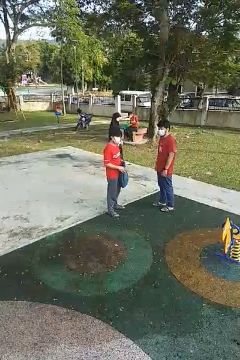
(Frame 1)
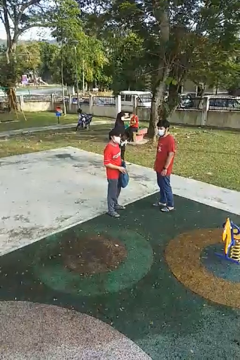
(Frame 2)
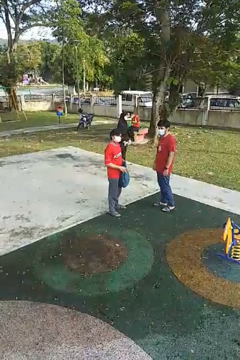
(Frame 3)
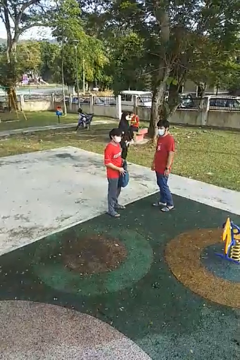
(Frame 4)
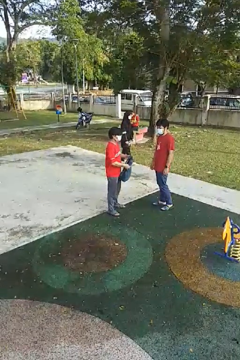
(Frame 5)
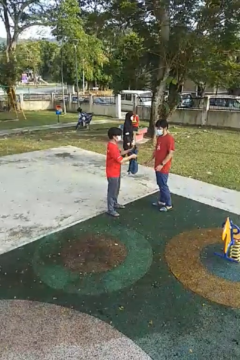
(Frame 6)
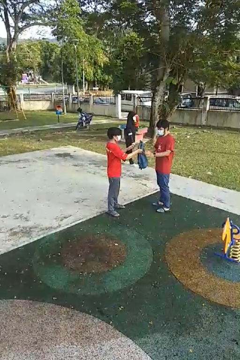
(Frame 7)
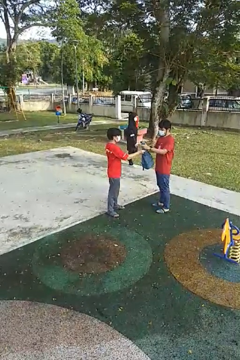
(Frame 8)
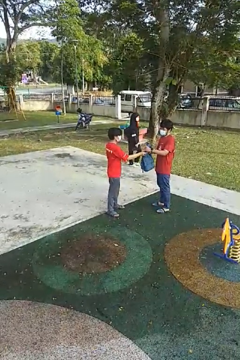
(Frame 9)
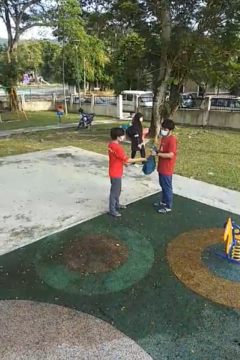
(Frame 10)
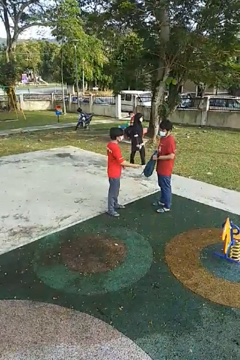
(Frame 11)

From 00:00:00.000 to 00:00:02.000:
person transfers object to person

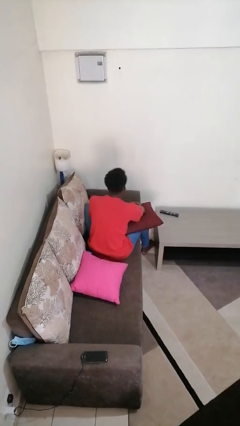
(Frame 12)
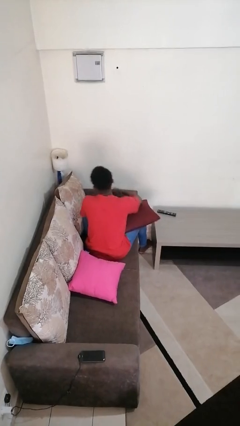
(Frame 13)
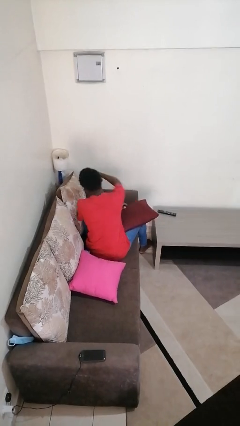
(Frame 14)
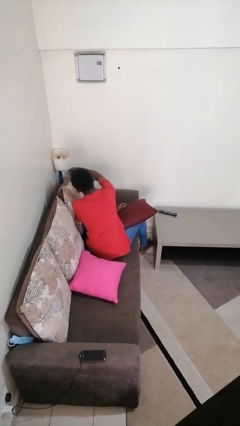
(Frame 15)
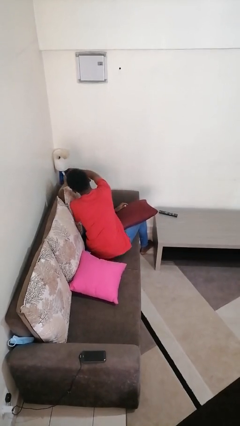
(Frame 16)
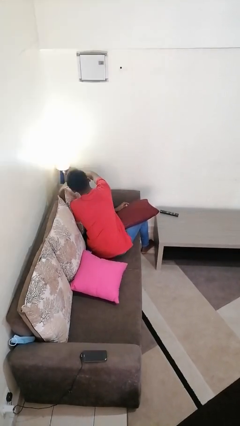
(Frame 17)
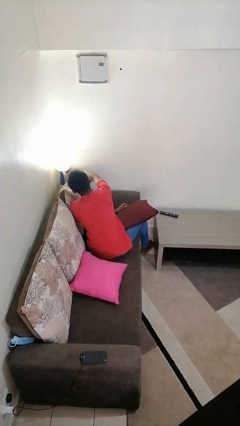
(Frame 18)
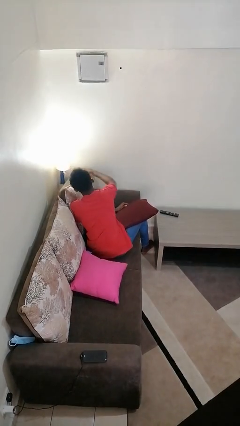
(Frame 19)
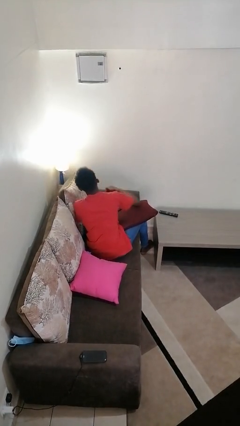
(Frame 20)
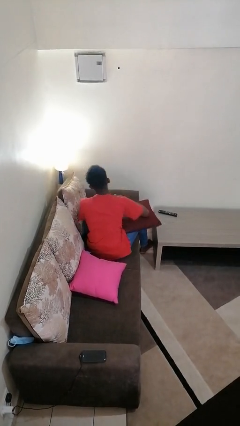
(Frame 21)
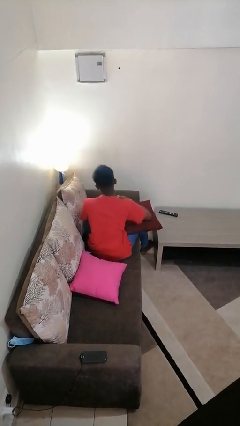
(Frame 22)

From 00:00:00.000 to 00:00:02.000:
person turns on lamp

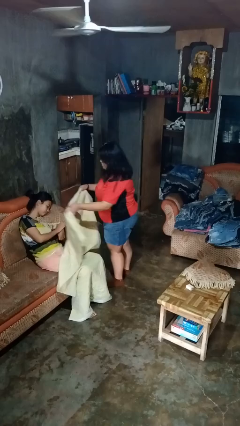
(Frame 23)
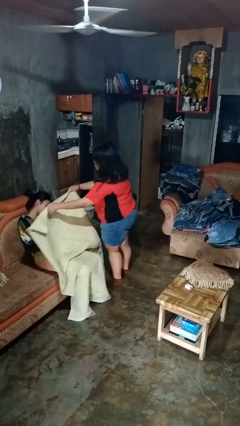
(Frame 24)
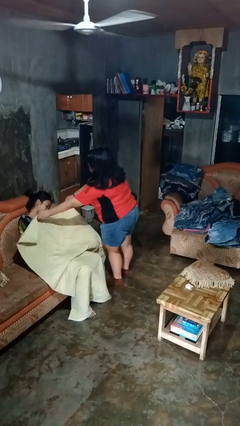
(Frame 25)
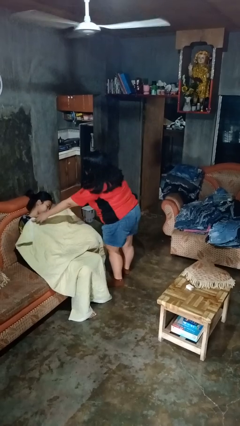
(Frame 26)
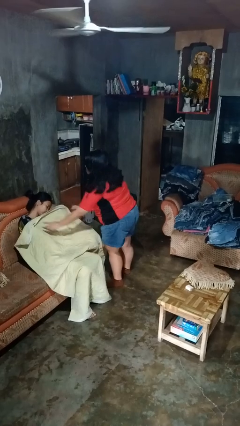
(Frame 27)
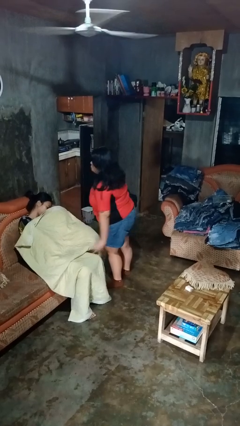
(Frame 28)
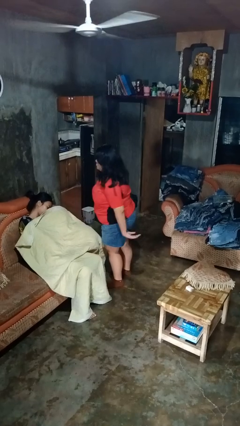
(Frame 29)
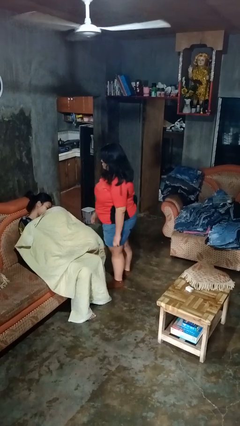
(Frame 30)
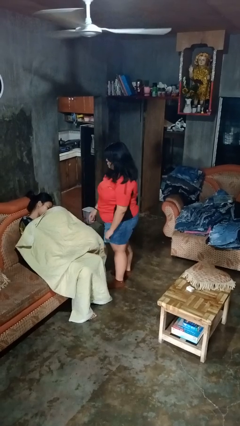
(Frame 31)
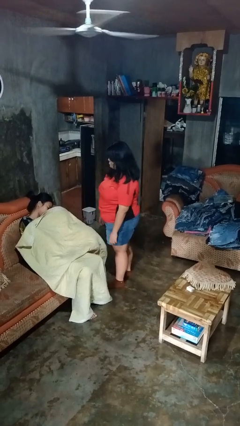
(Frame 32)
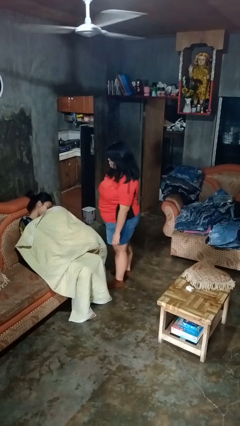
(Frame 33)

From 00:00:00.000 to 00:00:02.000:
person covers friend with blanket

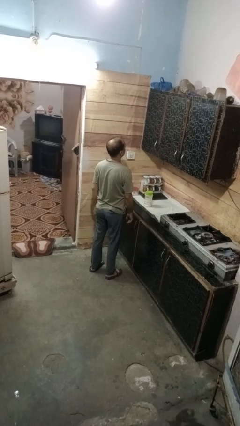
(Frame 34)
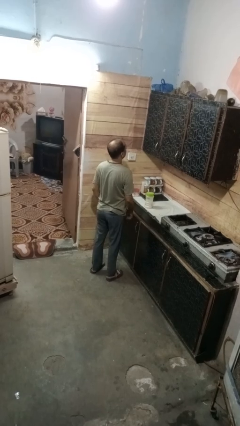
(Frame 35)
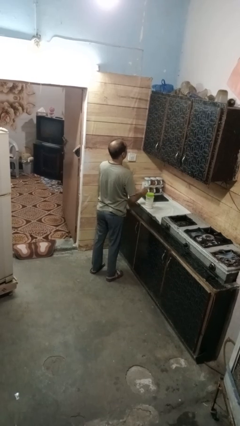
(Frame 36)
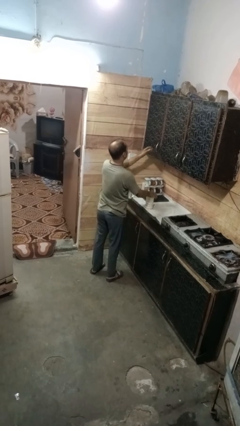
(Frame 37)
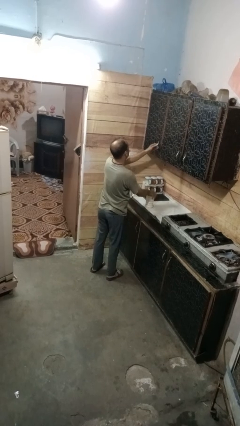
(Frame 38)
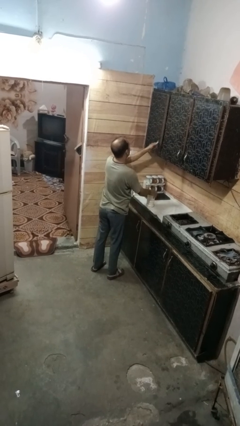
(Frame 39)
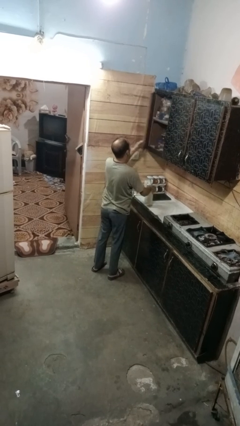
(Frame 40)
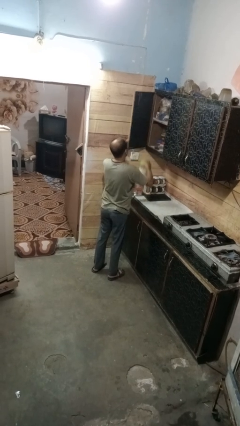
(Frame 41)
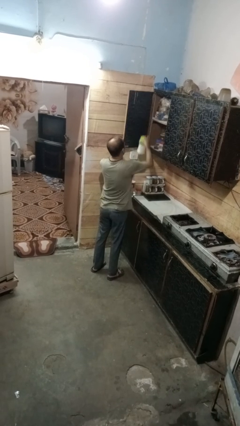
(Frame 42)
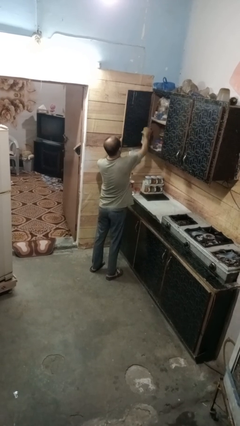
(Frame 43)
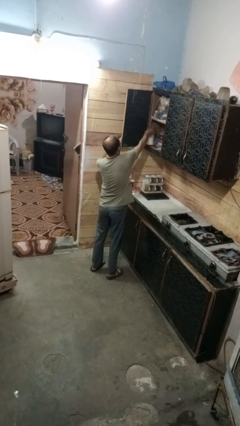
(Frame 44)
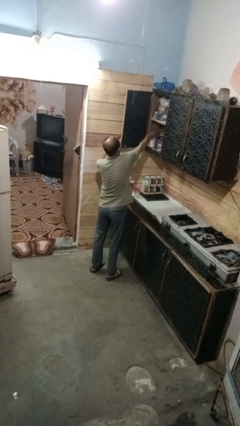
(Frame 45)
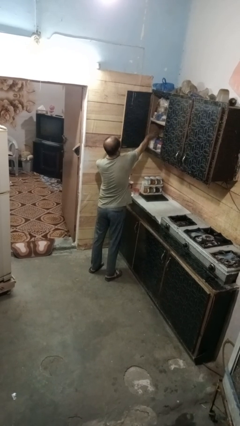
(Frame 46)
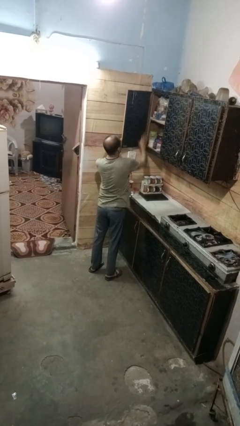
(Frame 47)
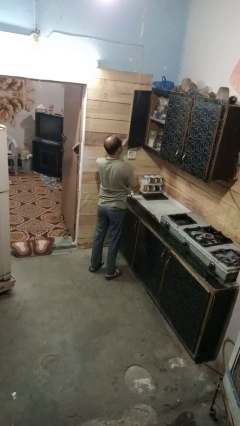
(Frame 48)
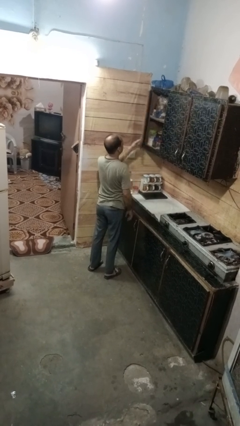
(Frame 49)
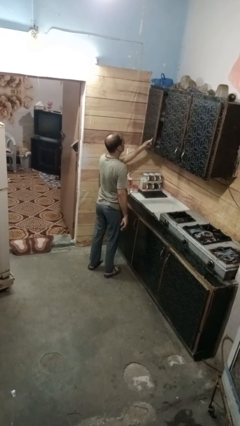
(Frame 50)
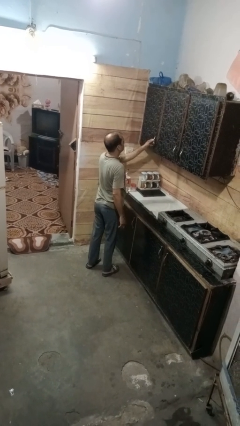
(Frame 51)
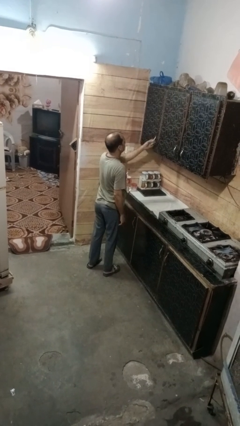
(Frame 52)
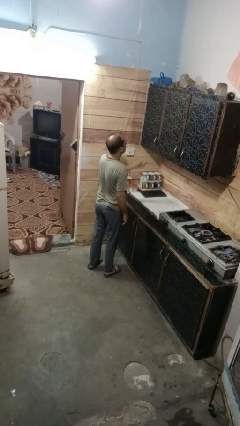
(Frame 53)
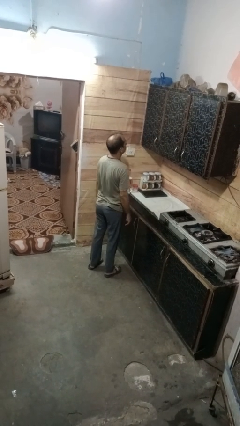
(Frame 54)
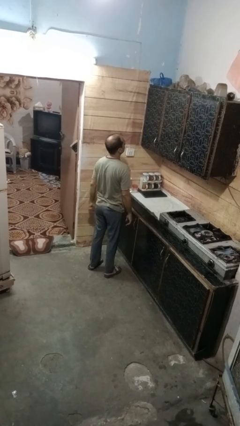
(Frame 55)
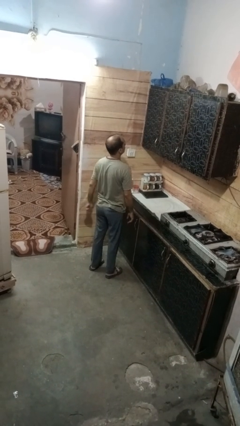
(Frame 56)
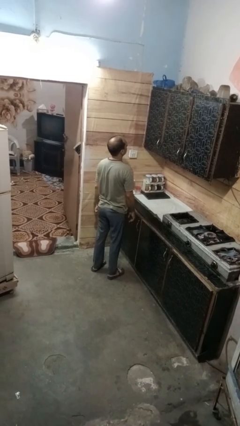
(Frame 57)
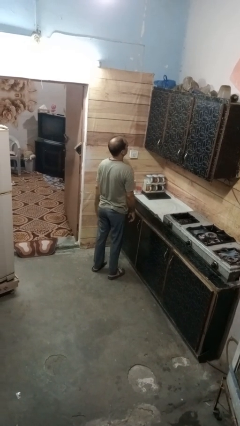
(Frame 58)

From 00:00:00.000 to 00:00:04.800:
person puts object in cabinet

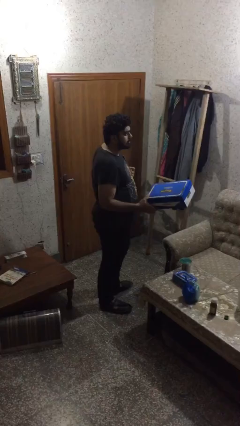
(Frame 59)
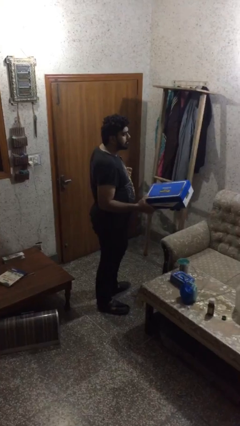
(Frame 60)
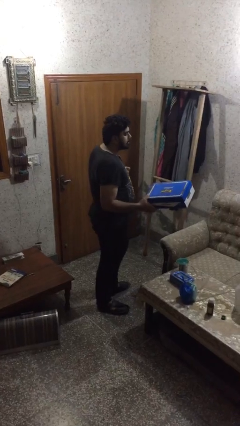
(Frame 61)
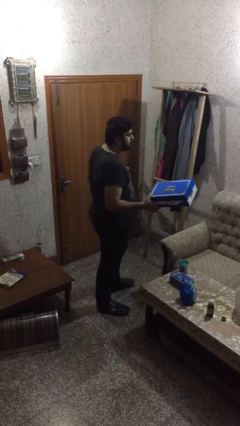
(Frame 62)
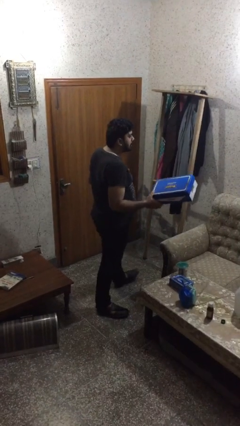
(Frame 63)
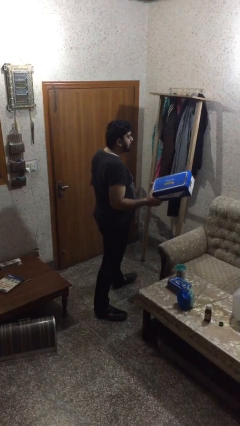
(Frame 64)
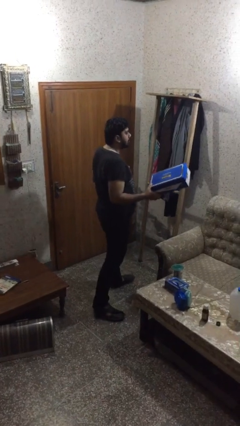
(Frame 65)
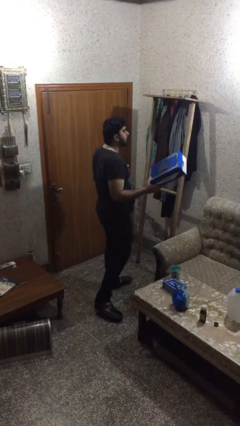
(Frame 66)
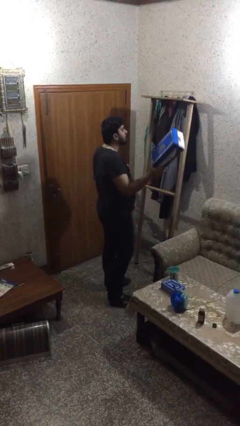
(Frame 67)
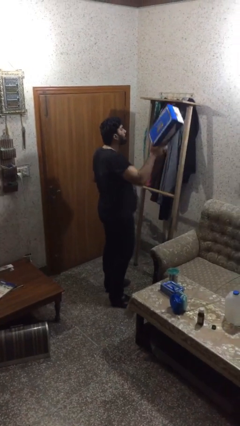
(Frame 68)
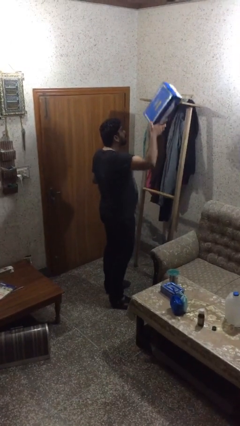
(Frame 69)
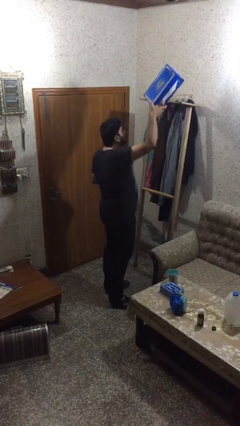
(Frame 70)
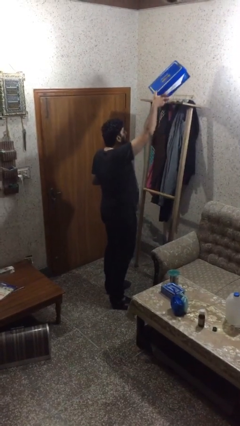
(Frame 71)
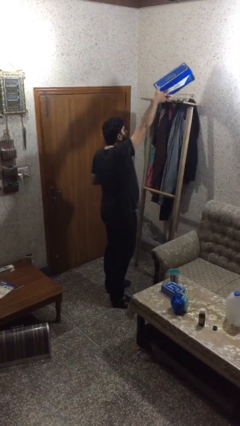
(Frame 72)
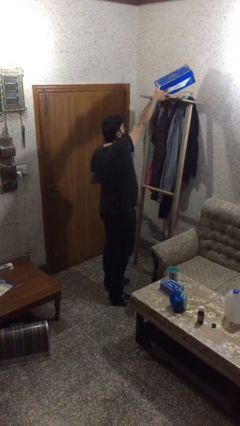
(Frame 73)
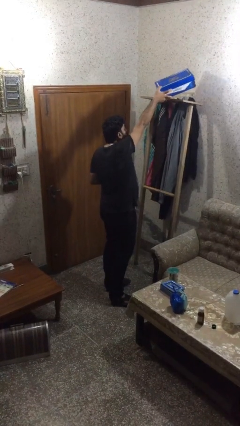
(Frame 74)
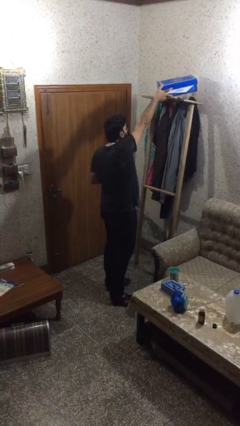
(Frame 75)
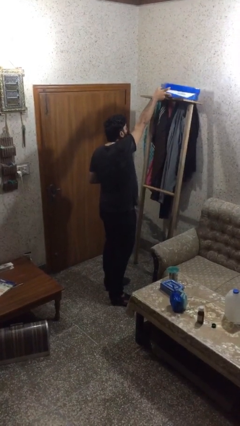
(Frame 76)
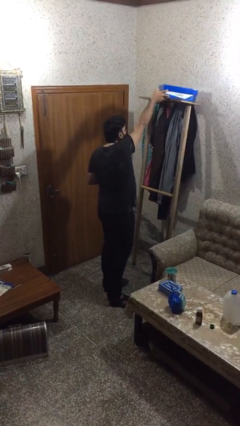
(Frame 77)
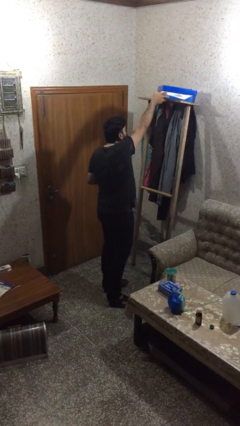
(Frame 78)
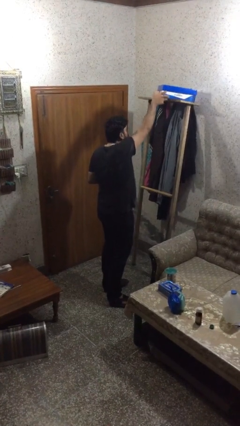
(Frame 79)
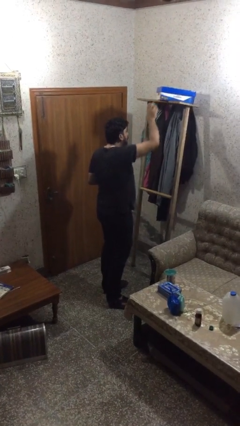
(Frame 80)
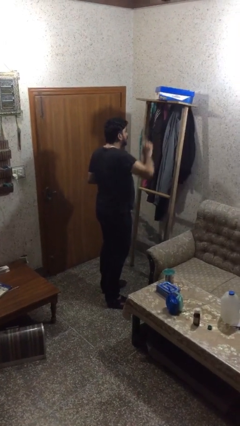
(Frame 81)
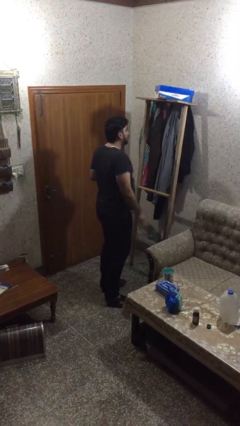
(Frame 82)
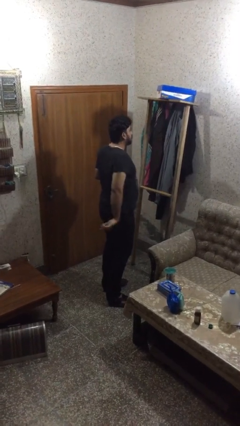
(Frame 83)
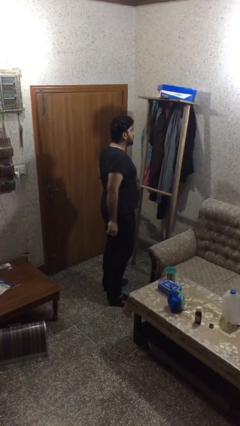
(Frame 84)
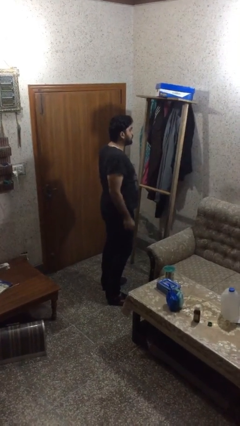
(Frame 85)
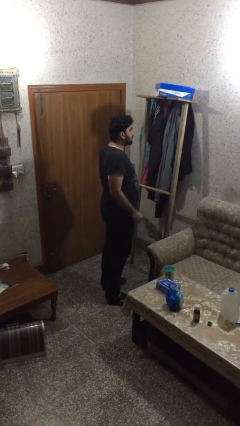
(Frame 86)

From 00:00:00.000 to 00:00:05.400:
person puts down object on shelf

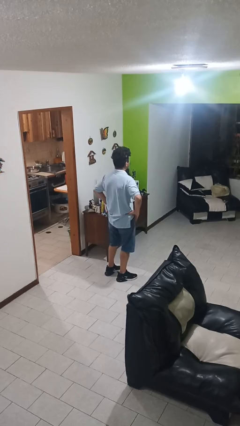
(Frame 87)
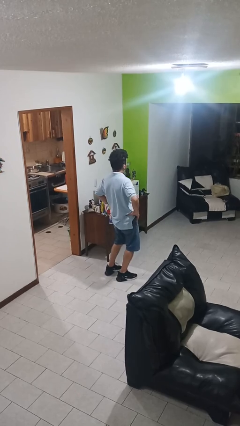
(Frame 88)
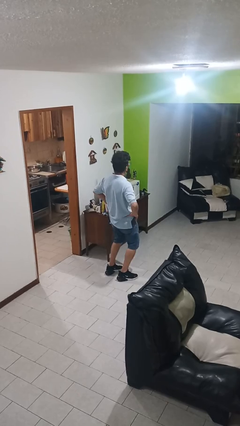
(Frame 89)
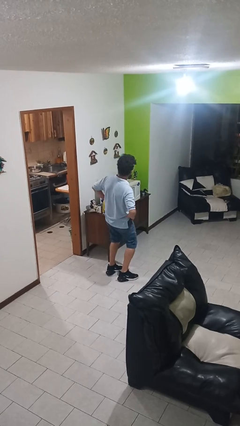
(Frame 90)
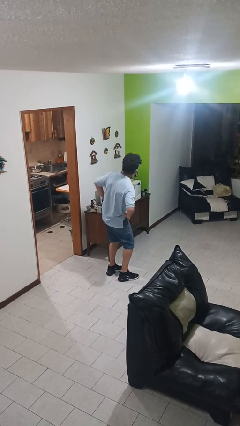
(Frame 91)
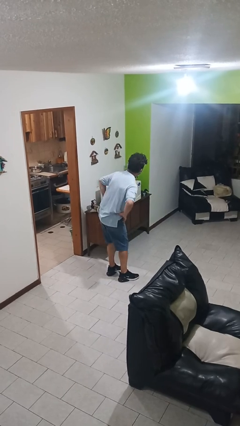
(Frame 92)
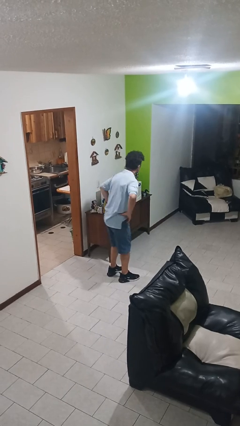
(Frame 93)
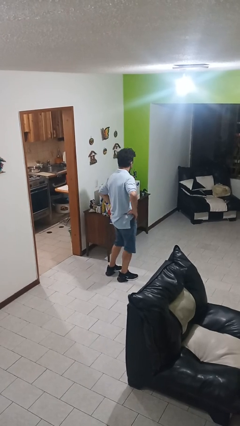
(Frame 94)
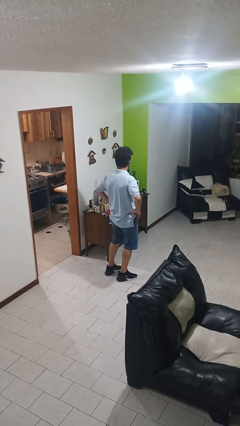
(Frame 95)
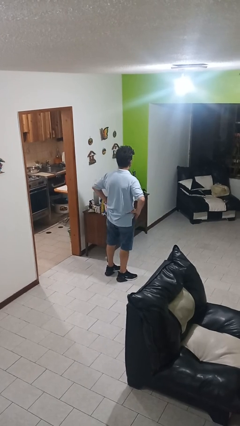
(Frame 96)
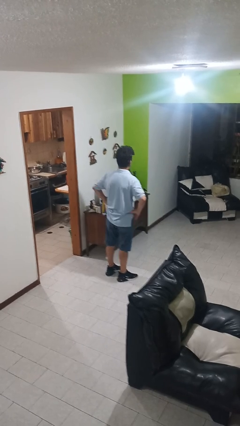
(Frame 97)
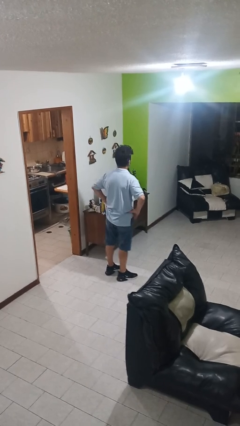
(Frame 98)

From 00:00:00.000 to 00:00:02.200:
person wiggles hips
